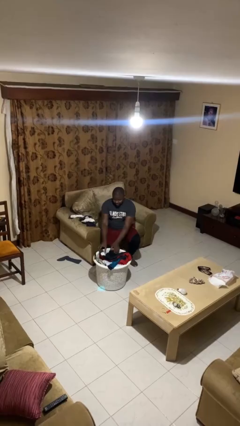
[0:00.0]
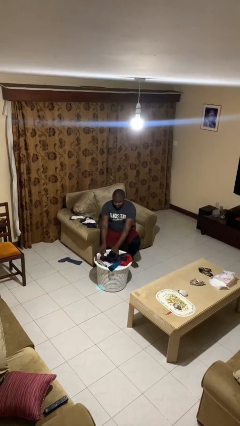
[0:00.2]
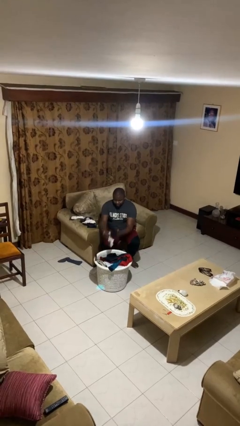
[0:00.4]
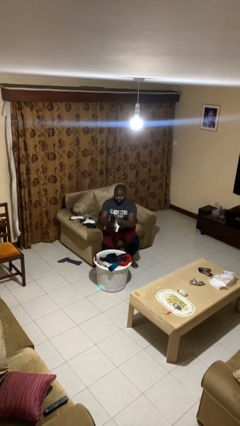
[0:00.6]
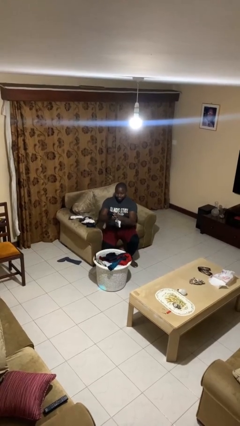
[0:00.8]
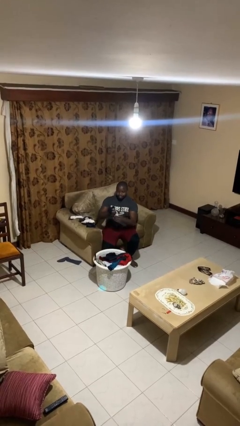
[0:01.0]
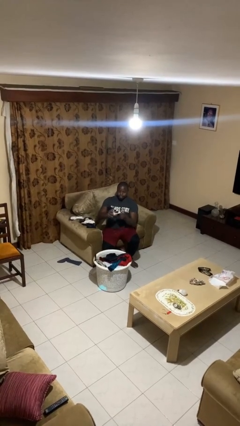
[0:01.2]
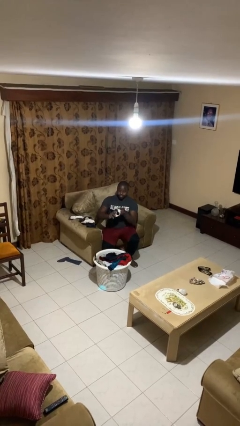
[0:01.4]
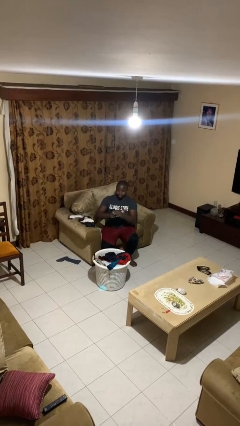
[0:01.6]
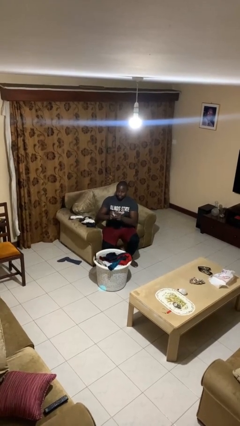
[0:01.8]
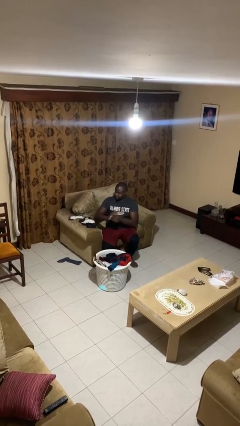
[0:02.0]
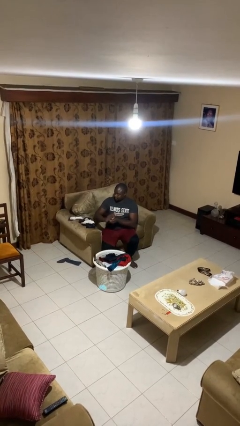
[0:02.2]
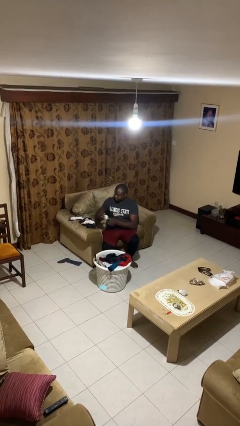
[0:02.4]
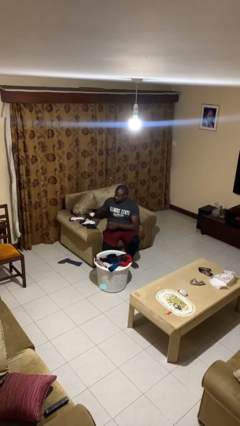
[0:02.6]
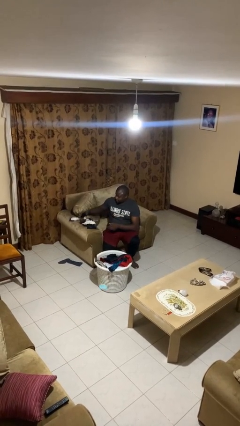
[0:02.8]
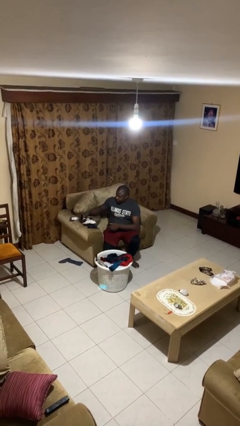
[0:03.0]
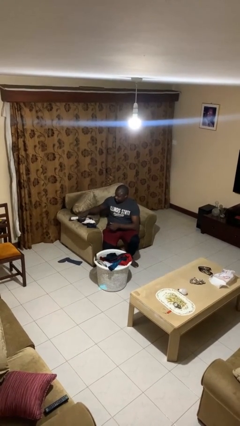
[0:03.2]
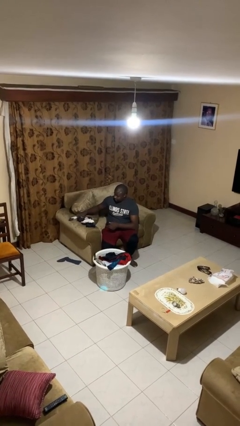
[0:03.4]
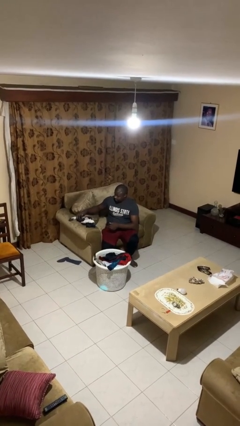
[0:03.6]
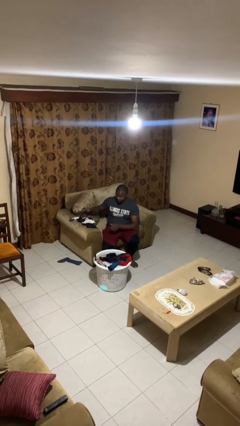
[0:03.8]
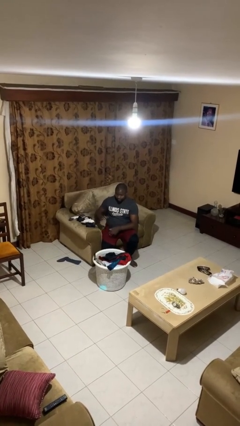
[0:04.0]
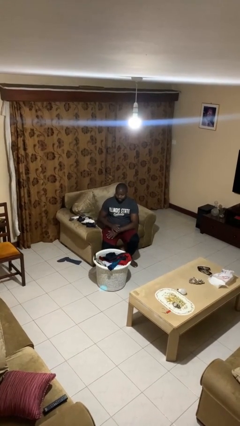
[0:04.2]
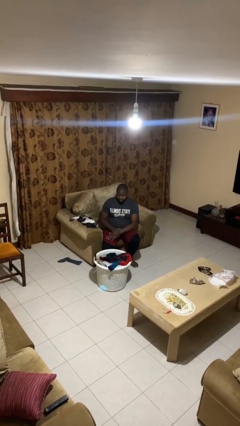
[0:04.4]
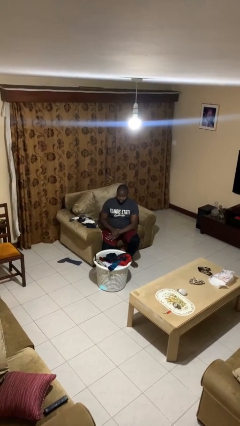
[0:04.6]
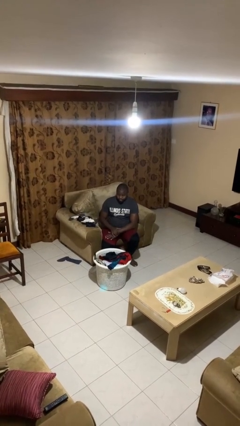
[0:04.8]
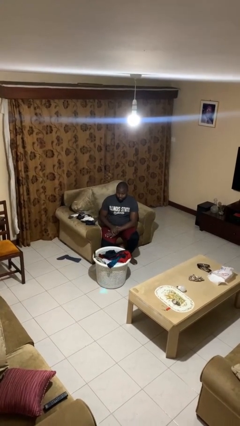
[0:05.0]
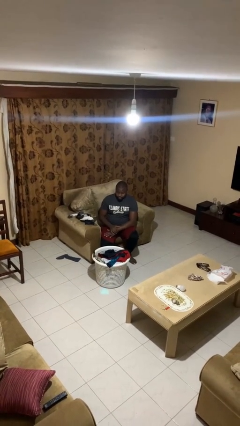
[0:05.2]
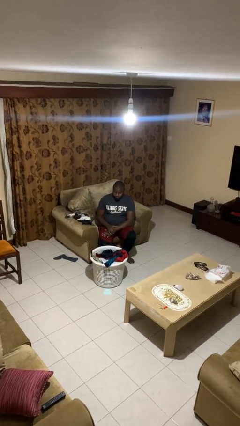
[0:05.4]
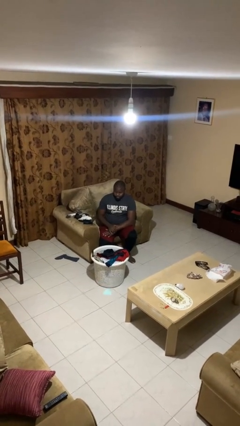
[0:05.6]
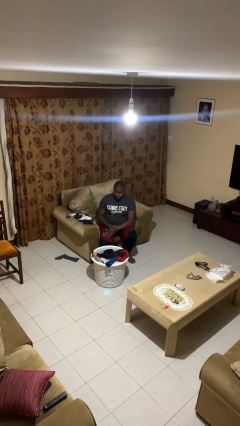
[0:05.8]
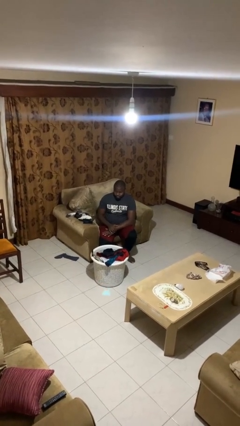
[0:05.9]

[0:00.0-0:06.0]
person folds socks

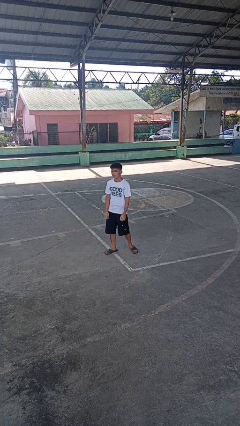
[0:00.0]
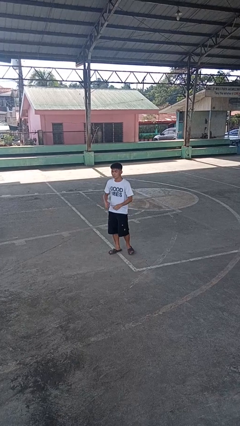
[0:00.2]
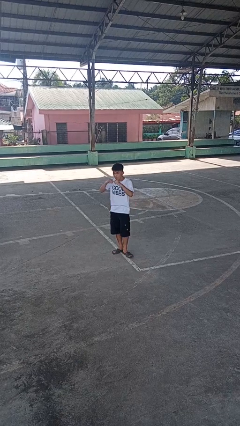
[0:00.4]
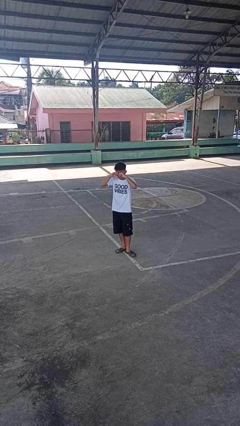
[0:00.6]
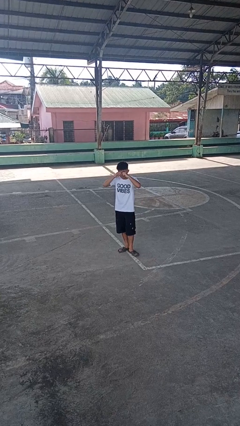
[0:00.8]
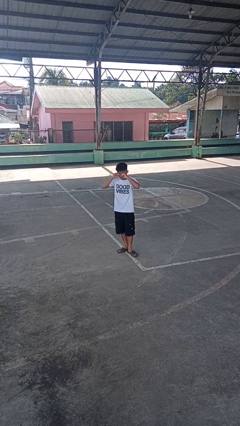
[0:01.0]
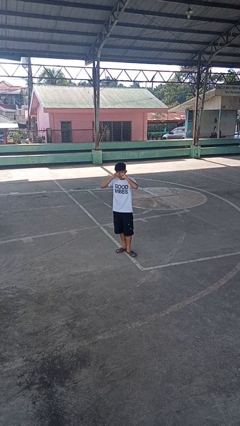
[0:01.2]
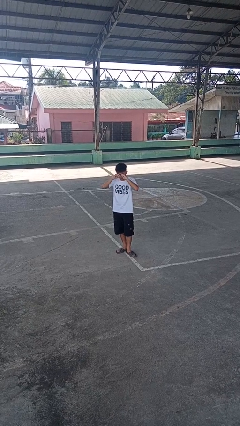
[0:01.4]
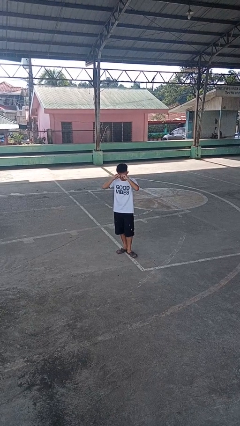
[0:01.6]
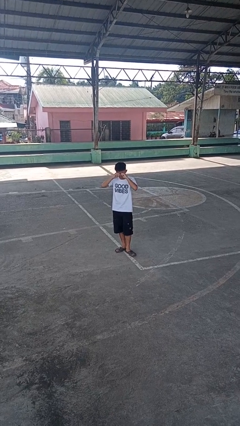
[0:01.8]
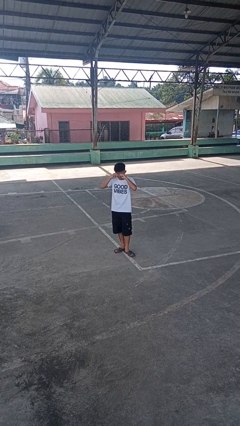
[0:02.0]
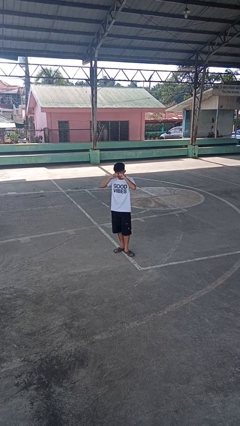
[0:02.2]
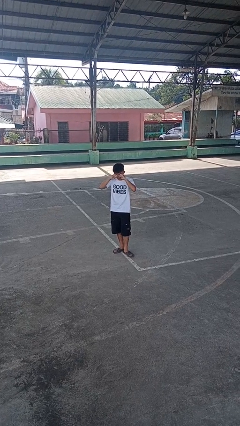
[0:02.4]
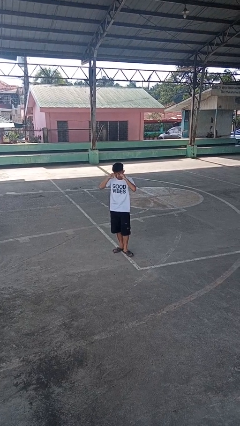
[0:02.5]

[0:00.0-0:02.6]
person rubs eyes

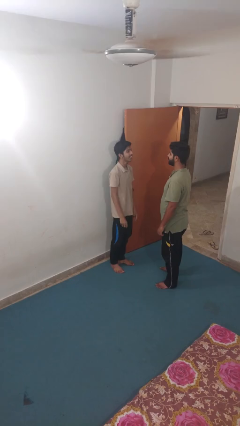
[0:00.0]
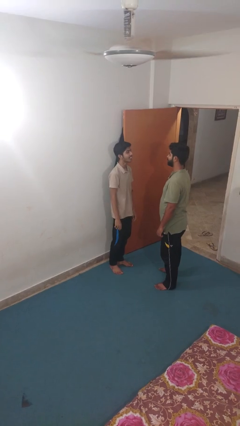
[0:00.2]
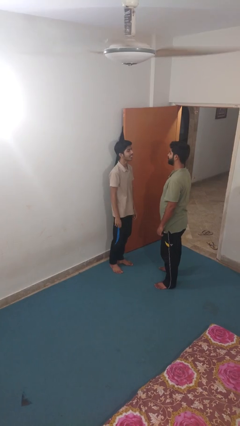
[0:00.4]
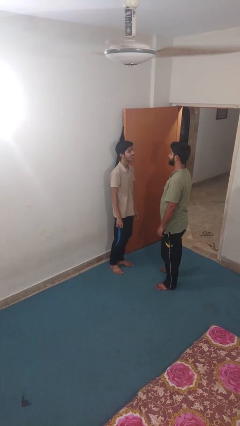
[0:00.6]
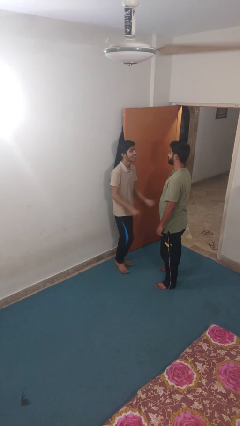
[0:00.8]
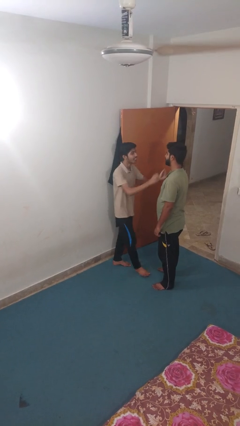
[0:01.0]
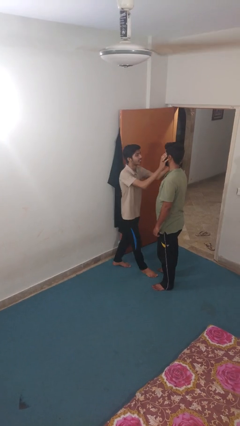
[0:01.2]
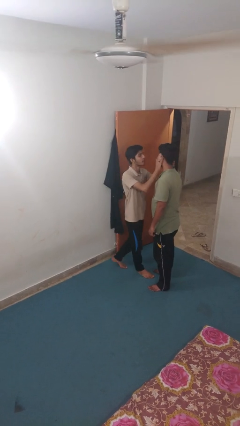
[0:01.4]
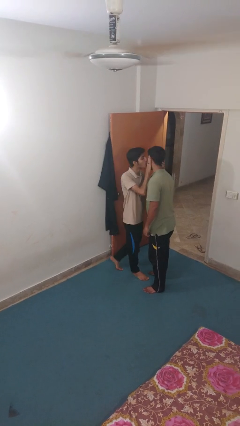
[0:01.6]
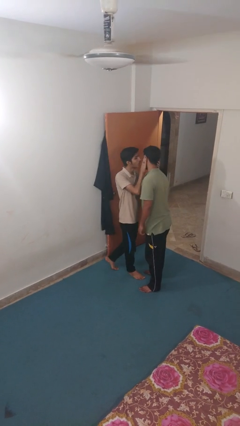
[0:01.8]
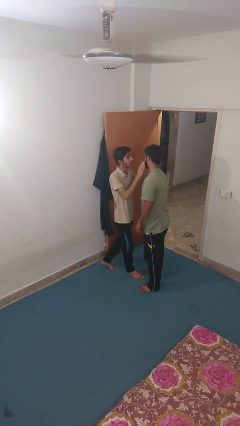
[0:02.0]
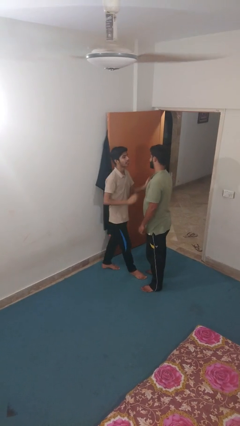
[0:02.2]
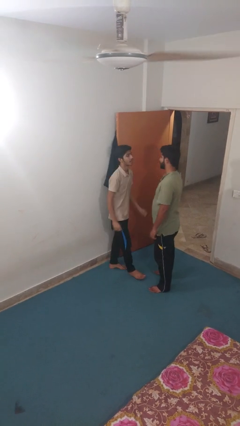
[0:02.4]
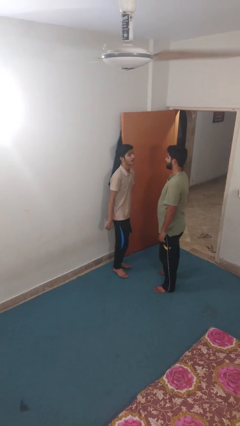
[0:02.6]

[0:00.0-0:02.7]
person kisses cheek of person

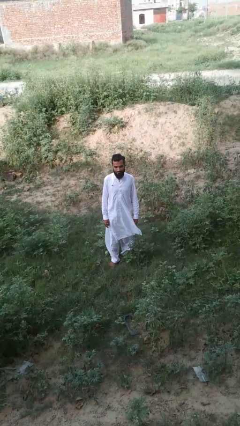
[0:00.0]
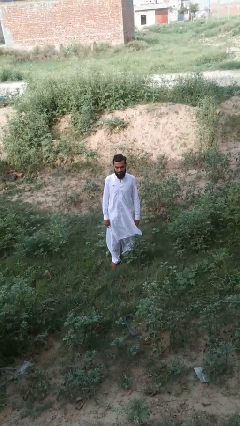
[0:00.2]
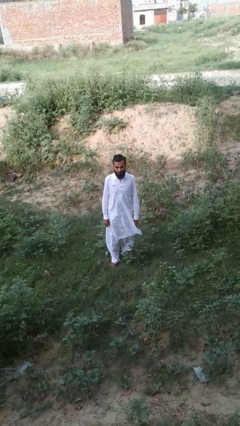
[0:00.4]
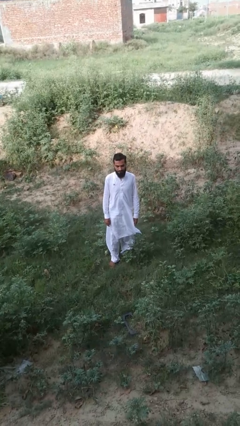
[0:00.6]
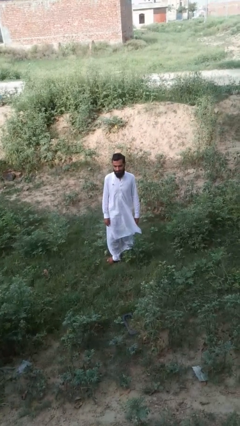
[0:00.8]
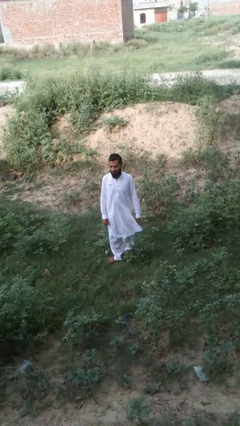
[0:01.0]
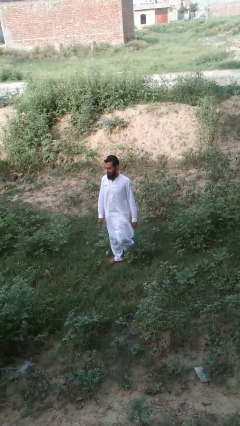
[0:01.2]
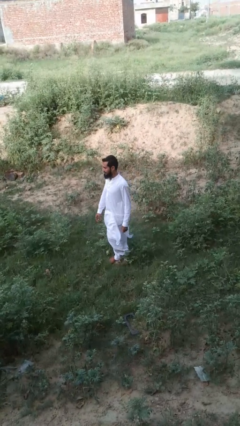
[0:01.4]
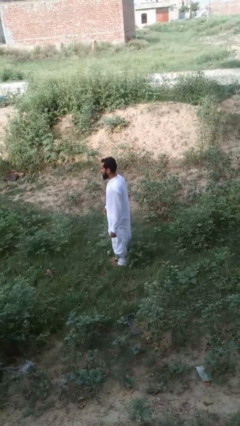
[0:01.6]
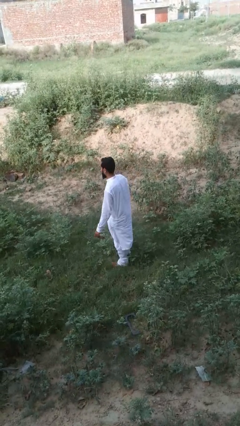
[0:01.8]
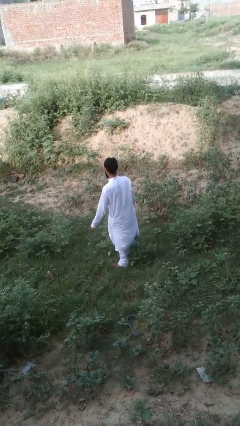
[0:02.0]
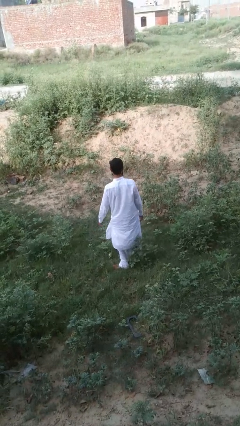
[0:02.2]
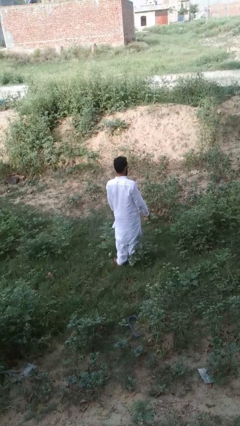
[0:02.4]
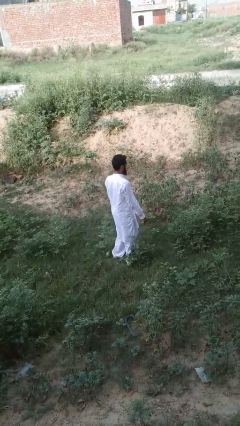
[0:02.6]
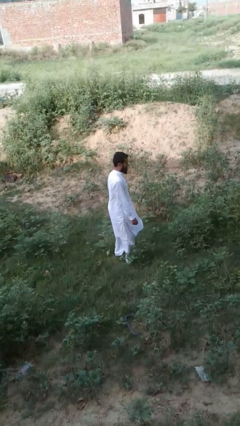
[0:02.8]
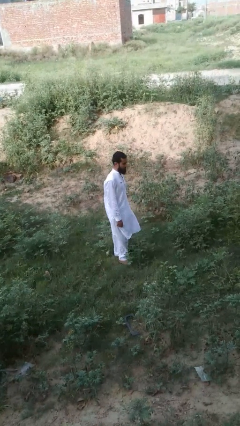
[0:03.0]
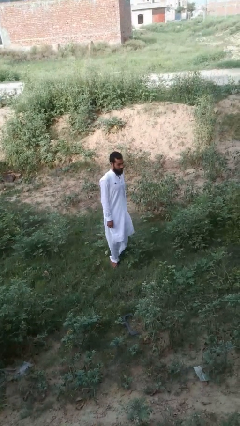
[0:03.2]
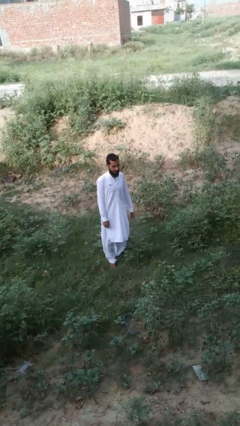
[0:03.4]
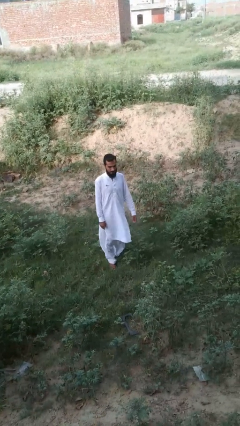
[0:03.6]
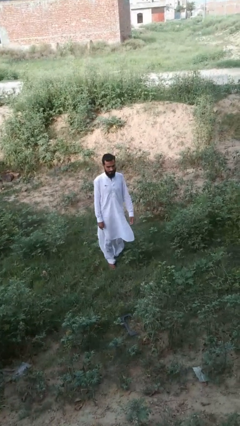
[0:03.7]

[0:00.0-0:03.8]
person twirls

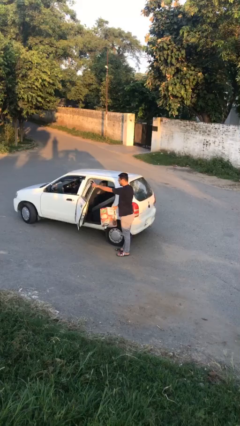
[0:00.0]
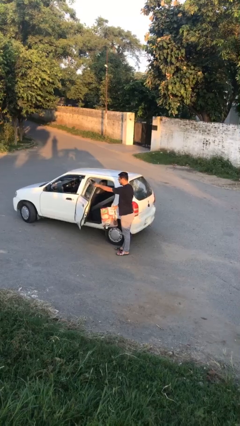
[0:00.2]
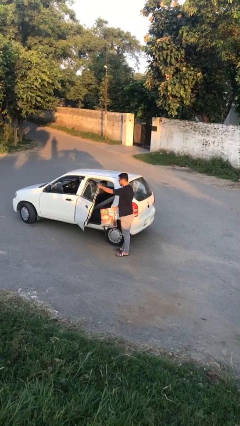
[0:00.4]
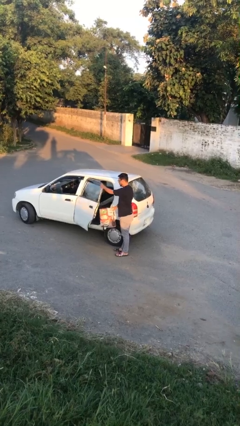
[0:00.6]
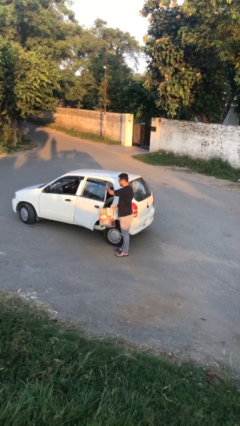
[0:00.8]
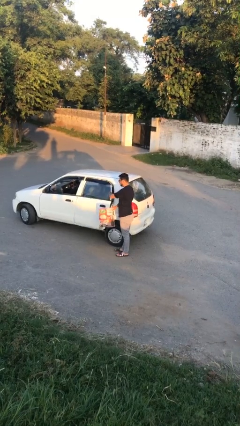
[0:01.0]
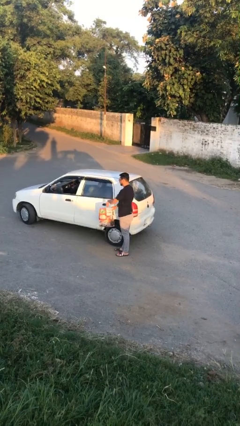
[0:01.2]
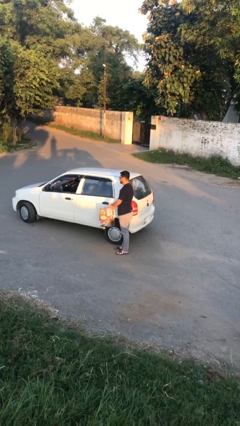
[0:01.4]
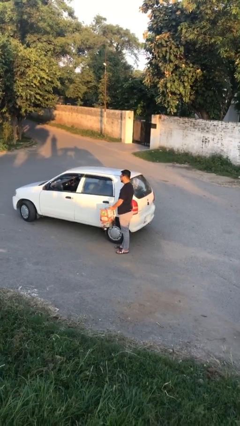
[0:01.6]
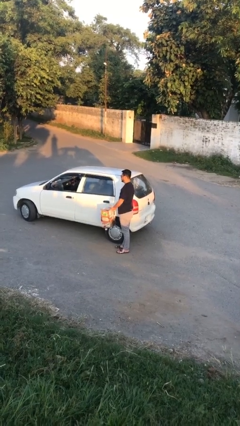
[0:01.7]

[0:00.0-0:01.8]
person closes car door

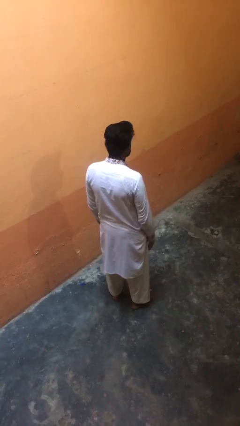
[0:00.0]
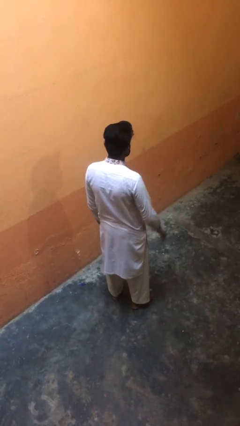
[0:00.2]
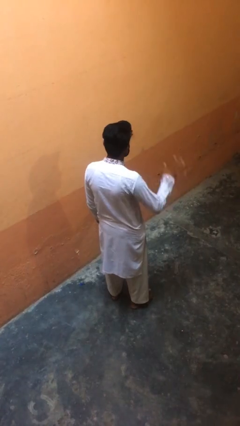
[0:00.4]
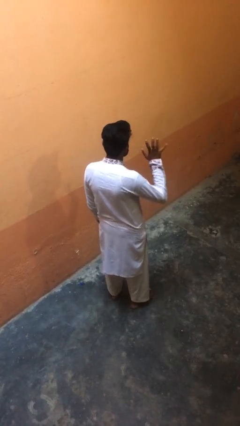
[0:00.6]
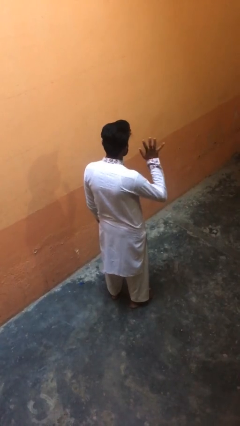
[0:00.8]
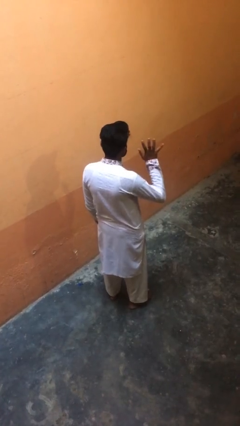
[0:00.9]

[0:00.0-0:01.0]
person gestures number five
